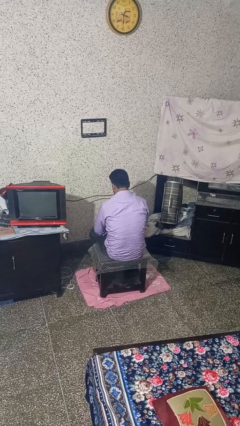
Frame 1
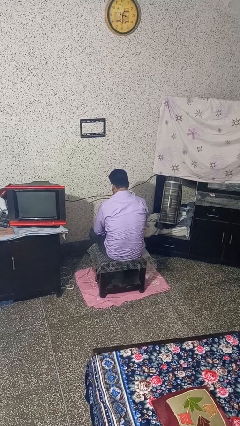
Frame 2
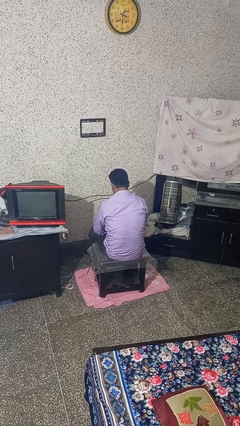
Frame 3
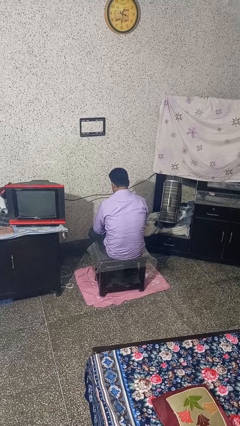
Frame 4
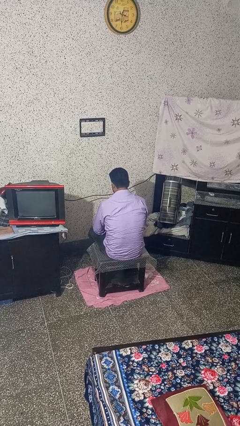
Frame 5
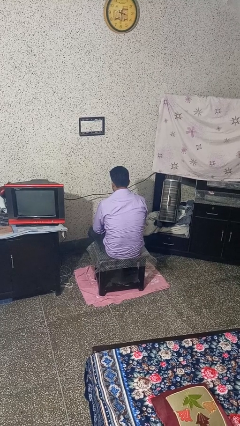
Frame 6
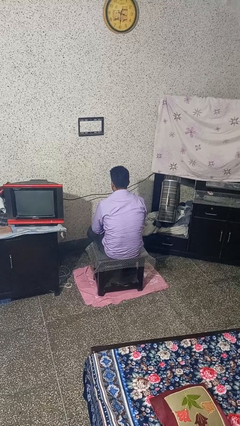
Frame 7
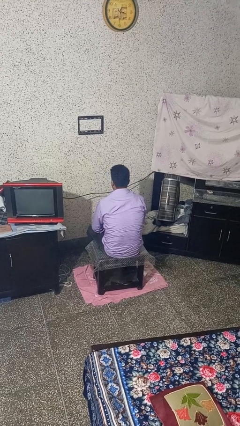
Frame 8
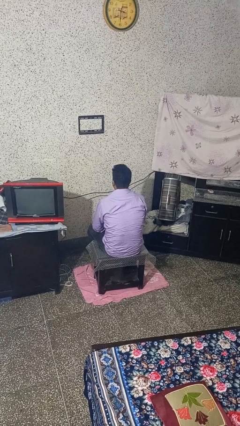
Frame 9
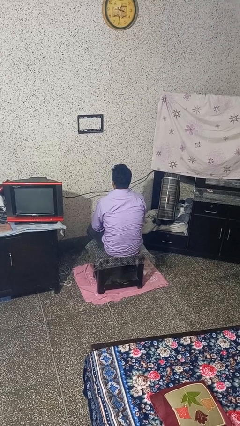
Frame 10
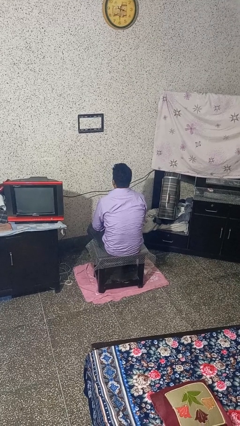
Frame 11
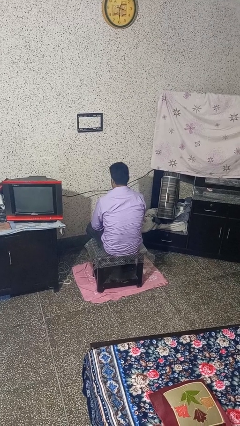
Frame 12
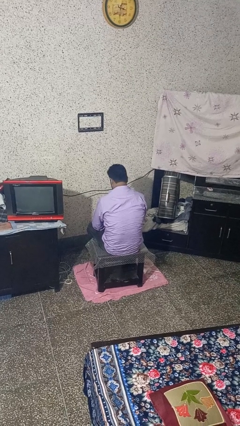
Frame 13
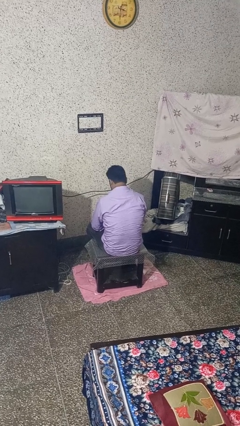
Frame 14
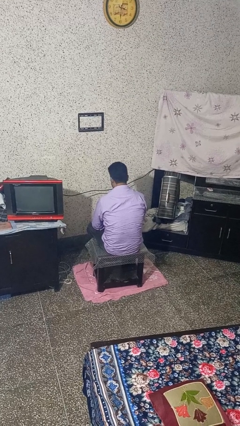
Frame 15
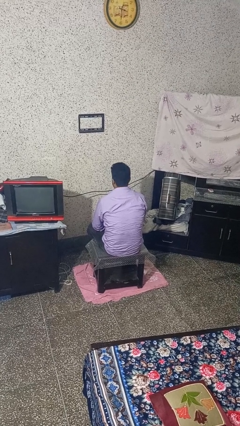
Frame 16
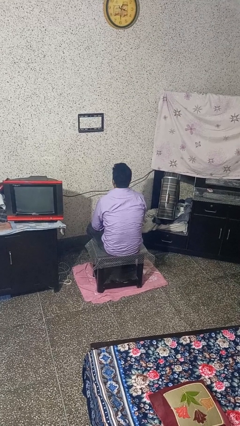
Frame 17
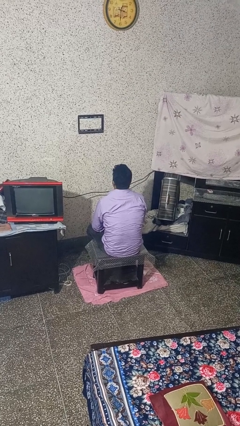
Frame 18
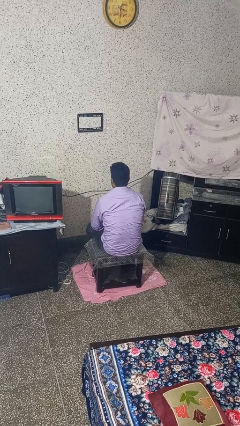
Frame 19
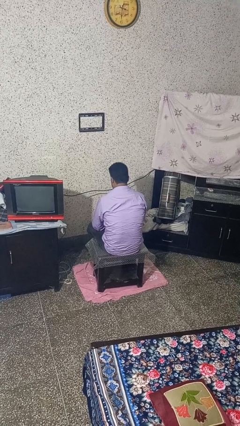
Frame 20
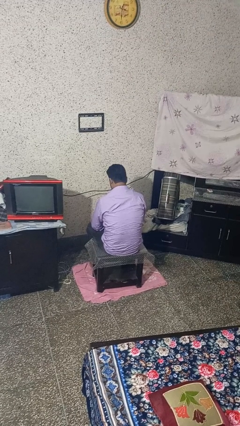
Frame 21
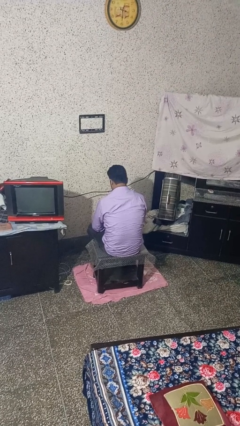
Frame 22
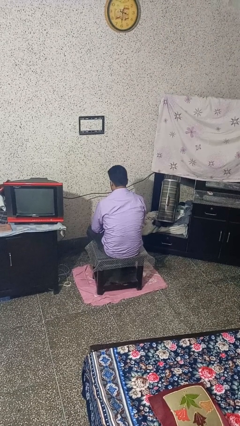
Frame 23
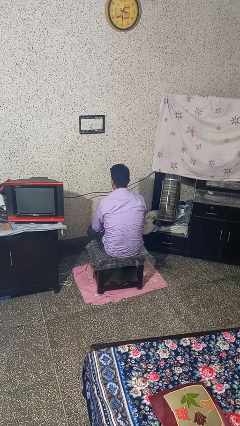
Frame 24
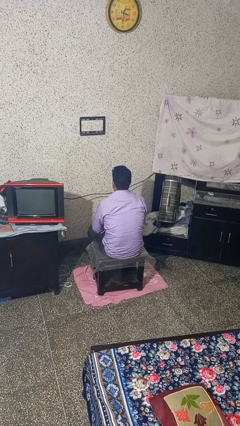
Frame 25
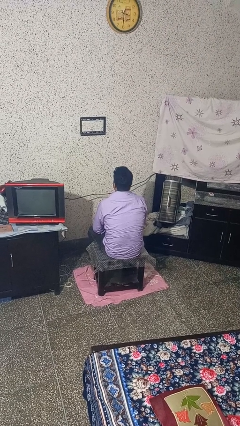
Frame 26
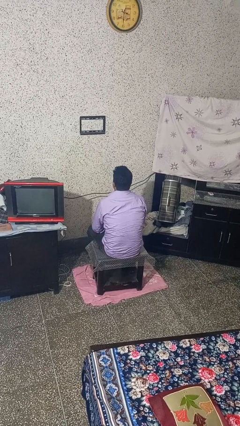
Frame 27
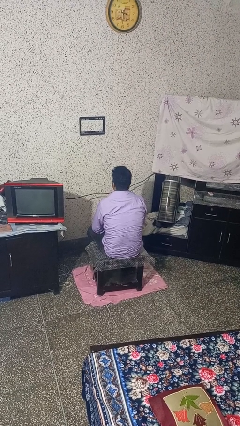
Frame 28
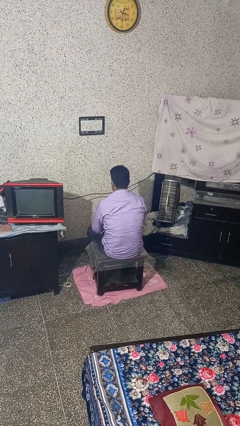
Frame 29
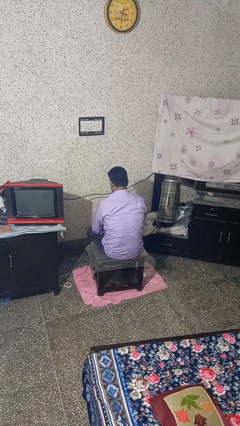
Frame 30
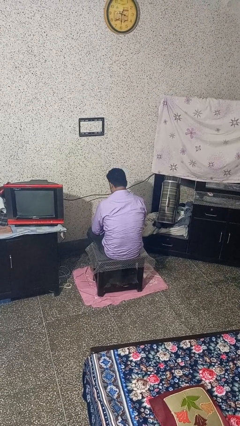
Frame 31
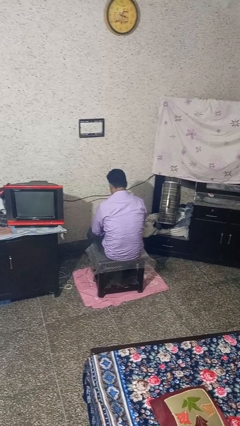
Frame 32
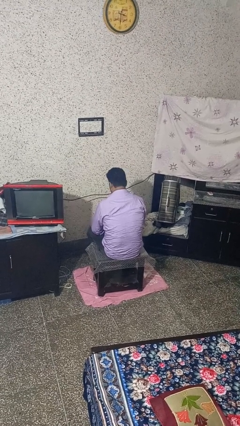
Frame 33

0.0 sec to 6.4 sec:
person nods head

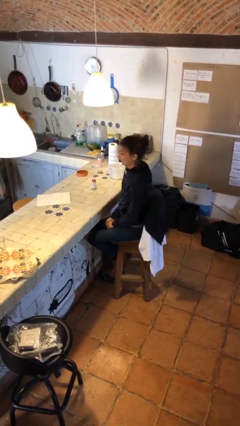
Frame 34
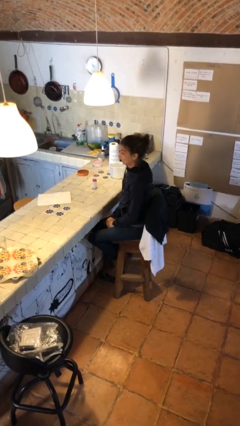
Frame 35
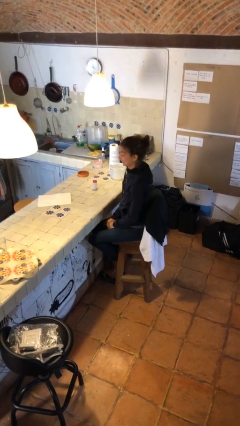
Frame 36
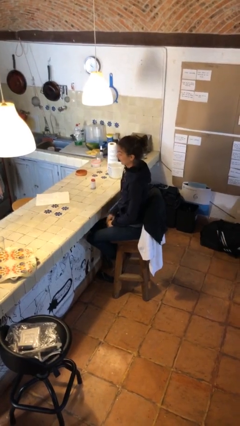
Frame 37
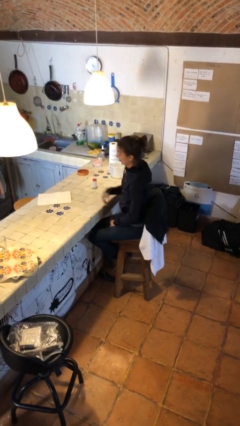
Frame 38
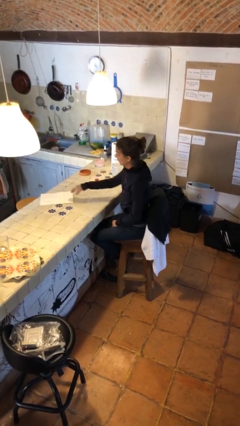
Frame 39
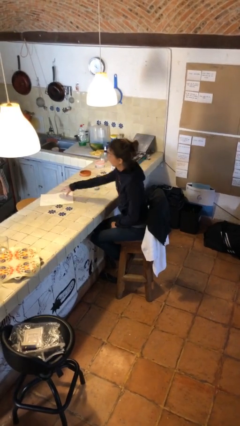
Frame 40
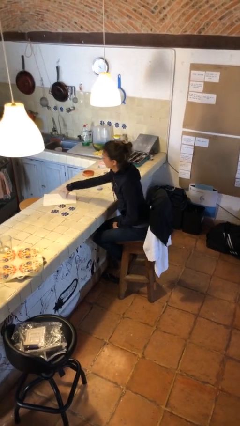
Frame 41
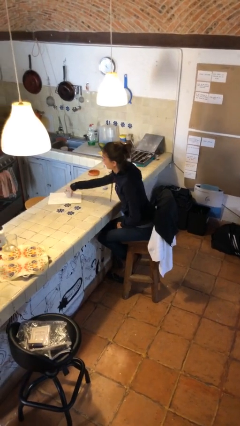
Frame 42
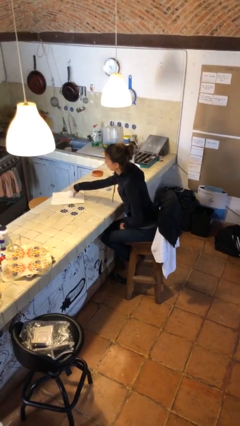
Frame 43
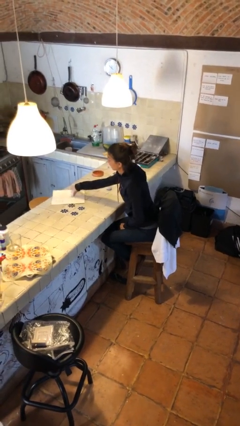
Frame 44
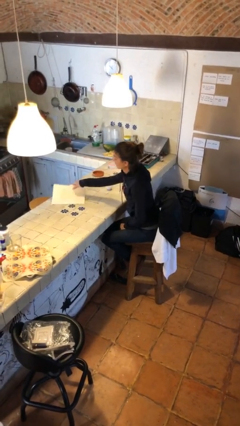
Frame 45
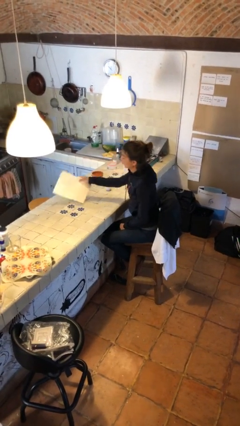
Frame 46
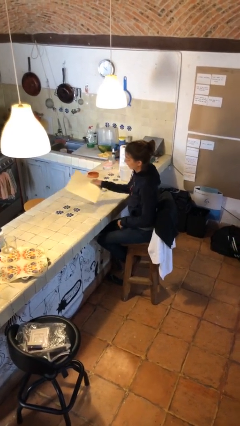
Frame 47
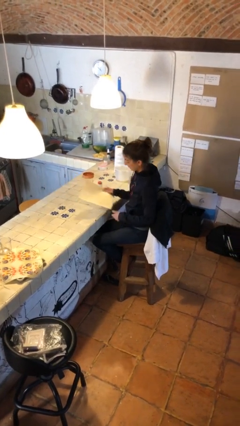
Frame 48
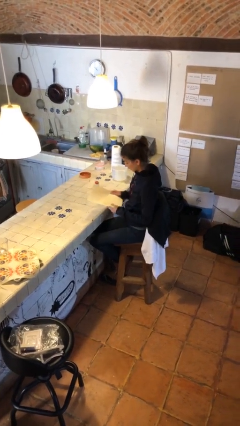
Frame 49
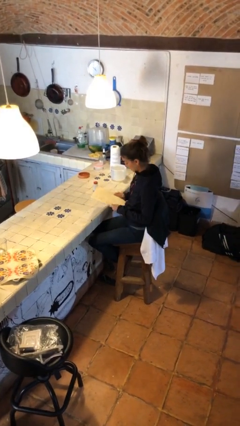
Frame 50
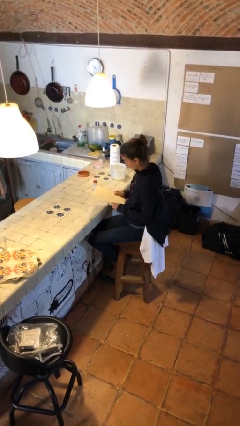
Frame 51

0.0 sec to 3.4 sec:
person picks up object from table

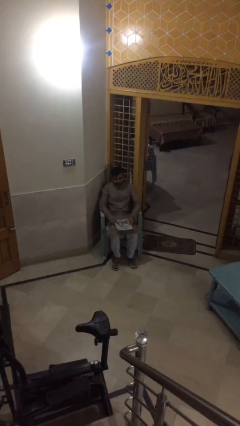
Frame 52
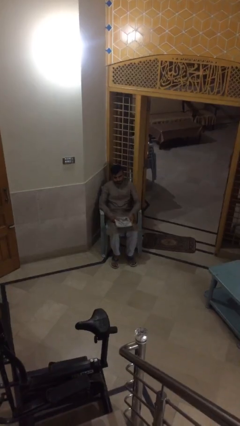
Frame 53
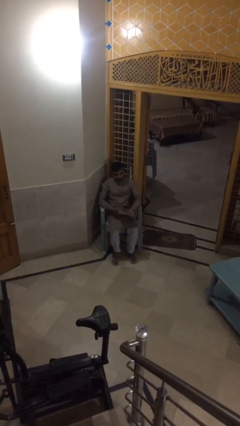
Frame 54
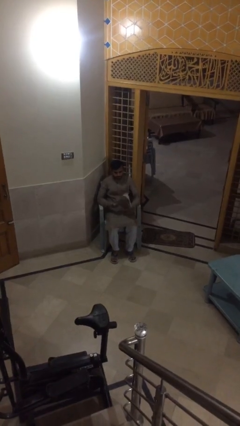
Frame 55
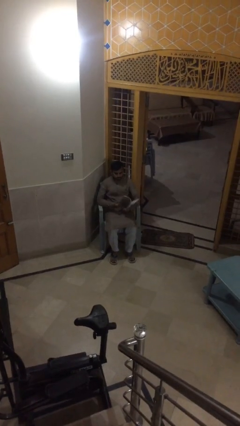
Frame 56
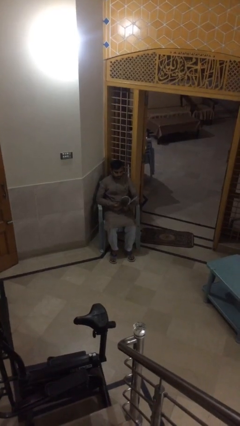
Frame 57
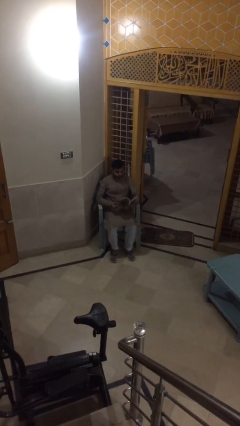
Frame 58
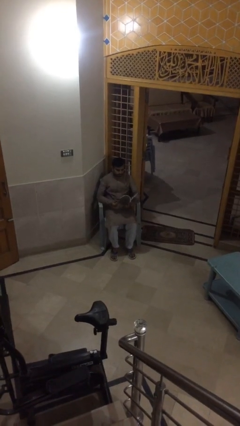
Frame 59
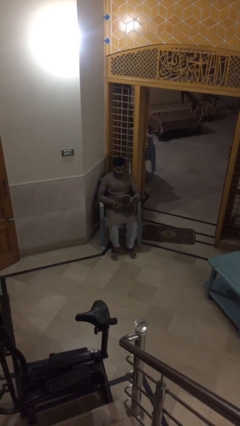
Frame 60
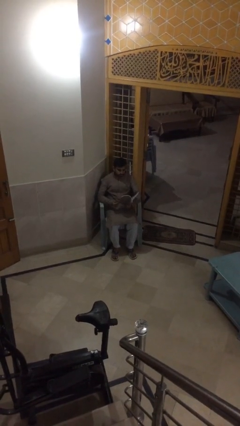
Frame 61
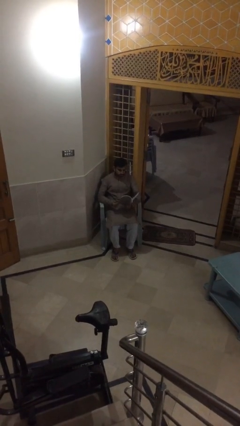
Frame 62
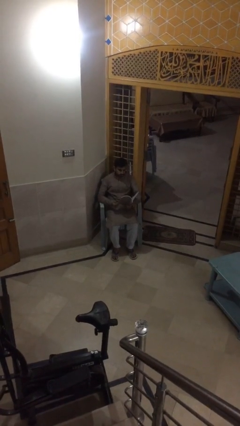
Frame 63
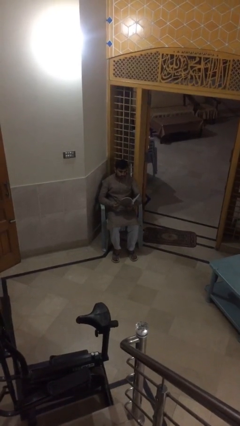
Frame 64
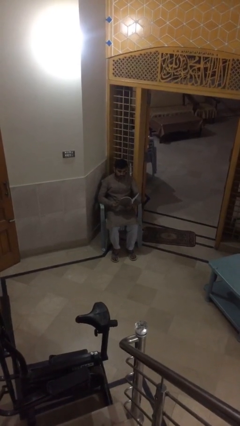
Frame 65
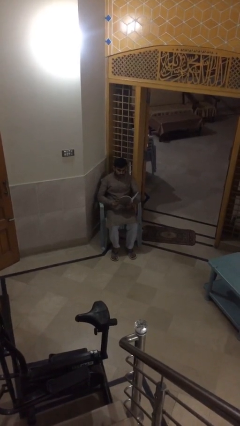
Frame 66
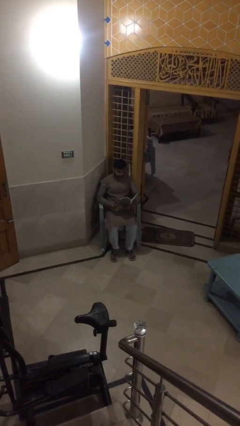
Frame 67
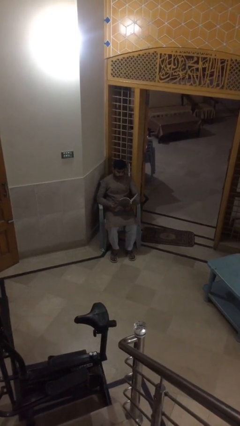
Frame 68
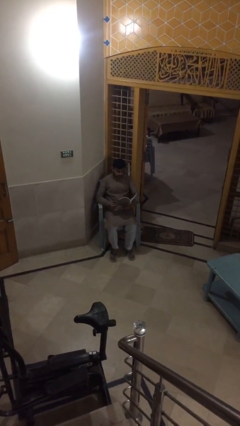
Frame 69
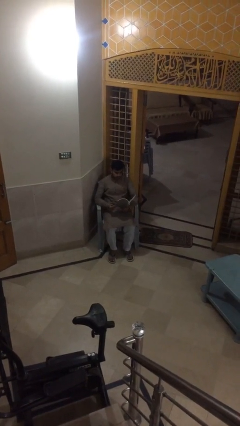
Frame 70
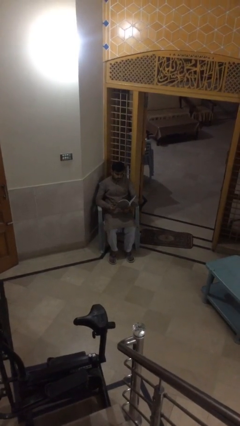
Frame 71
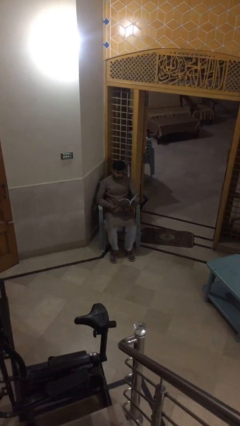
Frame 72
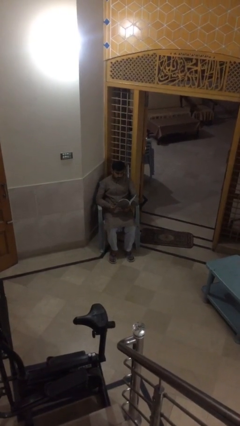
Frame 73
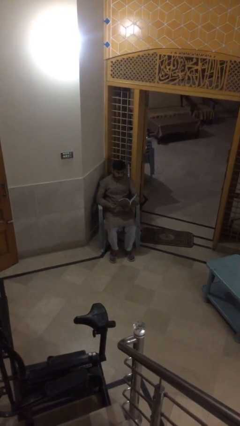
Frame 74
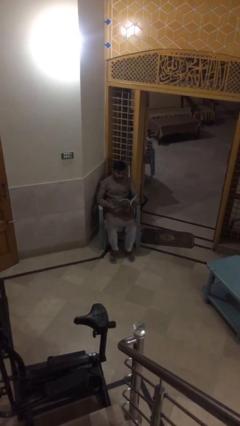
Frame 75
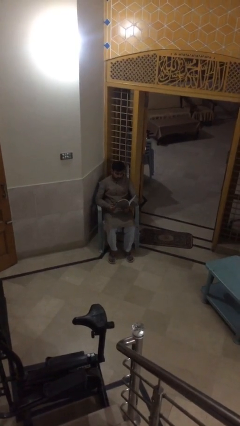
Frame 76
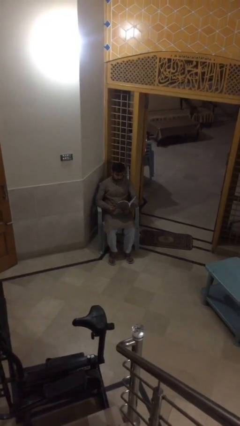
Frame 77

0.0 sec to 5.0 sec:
person reads document

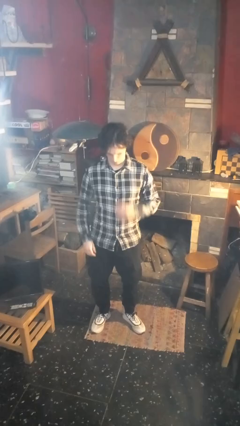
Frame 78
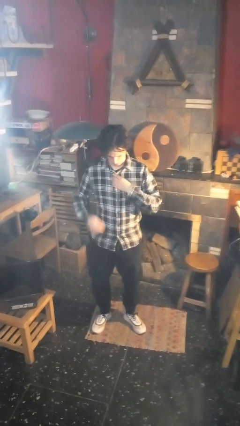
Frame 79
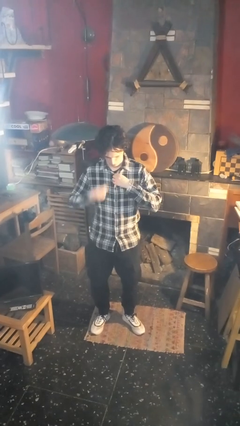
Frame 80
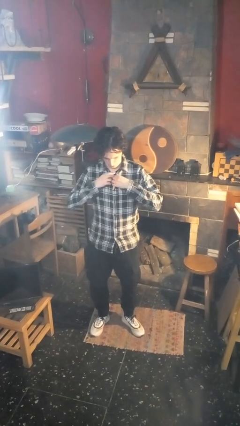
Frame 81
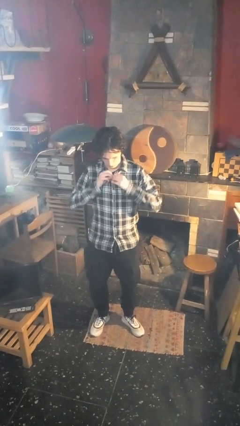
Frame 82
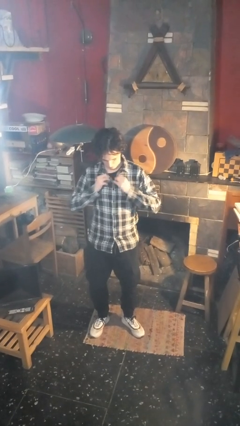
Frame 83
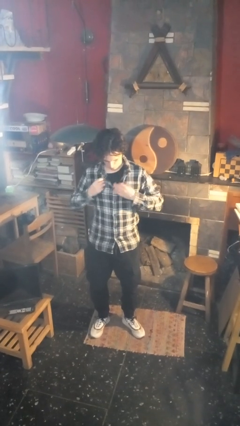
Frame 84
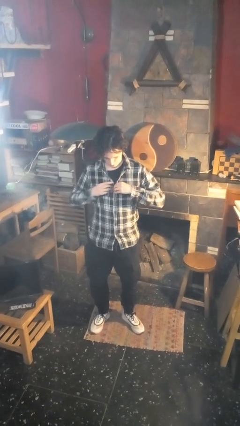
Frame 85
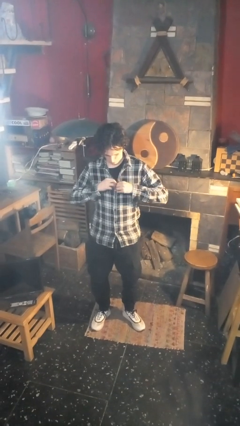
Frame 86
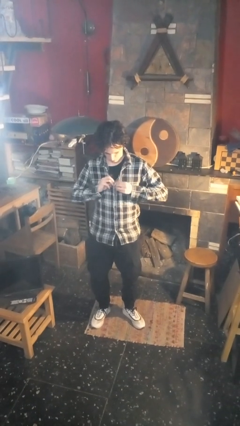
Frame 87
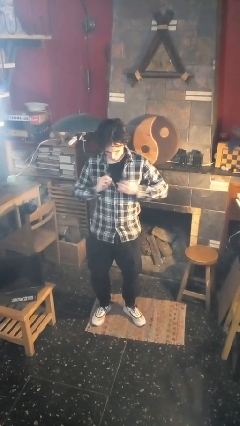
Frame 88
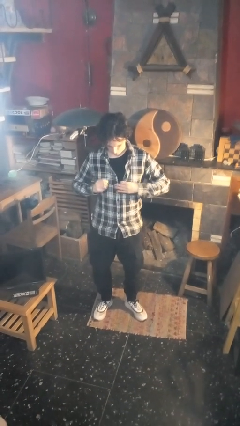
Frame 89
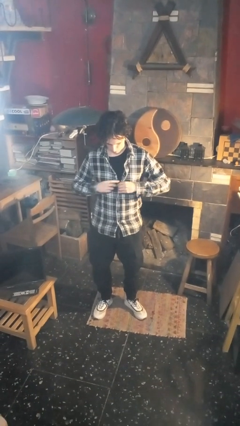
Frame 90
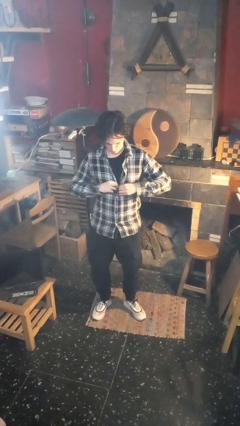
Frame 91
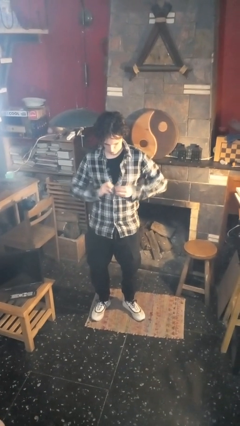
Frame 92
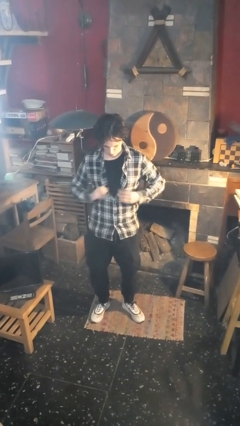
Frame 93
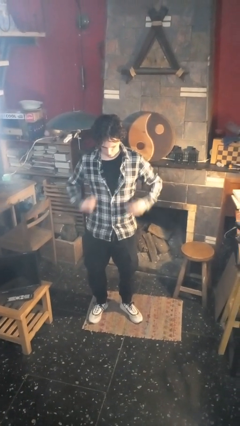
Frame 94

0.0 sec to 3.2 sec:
person unbuttons shirt
